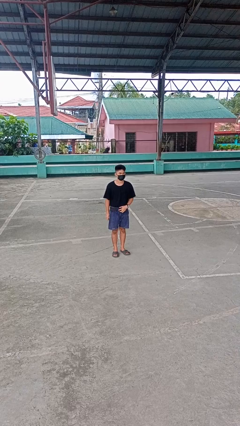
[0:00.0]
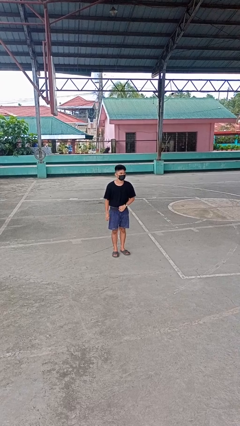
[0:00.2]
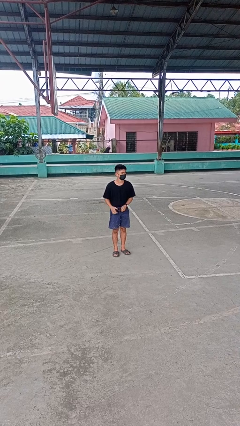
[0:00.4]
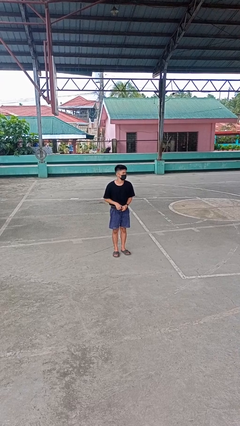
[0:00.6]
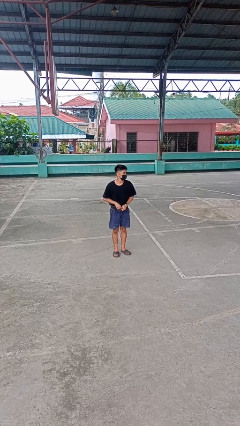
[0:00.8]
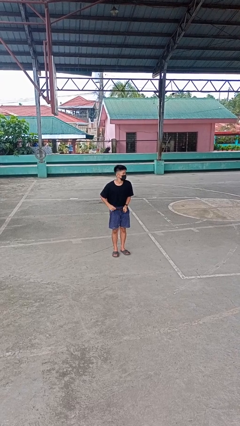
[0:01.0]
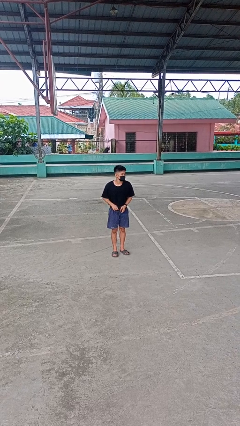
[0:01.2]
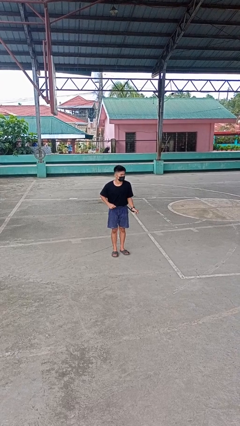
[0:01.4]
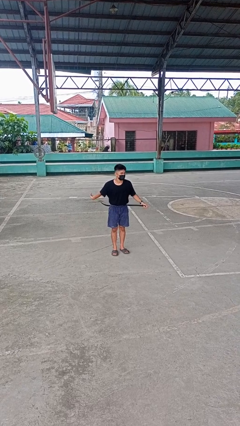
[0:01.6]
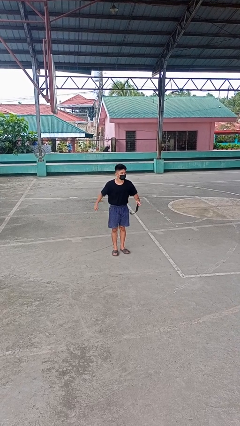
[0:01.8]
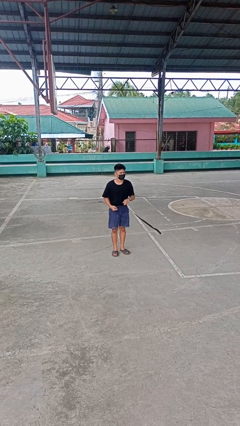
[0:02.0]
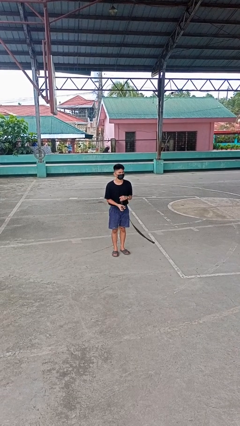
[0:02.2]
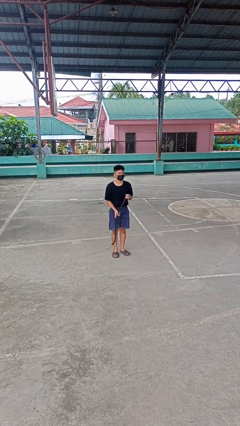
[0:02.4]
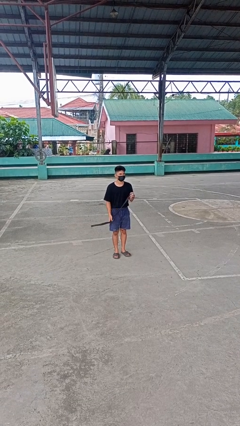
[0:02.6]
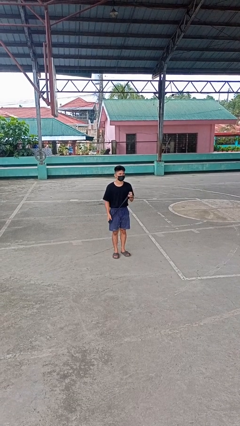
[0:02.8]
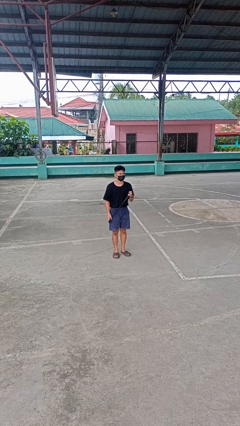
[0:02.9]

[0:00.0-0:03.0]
person takes off belt

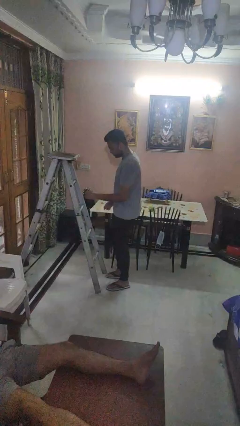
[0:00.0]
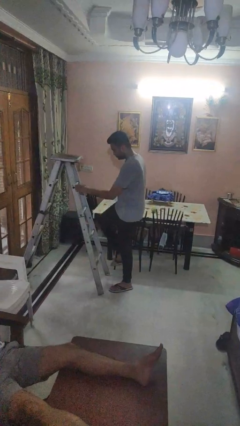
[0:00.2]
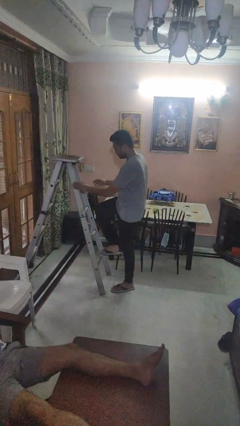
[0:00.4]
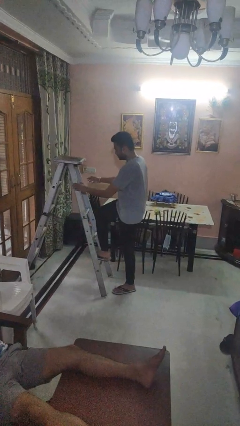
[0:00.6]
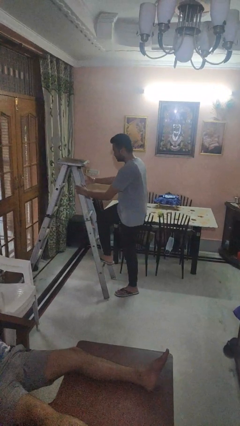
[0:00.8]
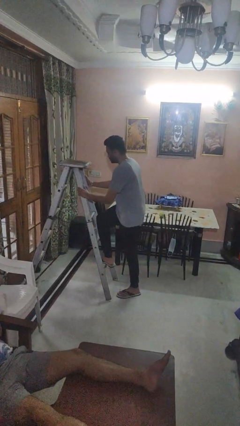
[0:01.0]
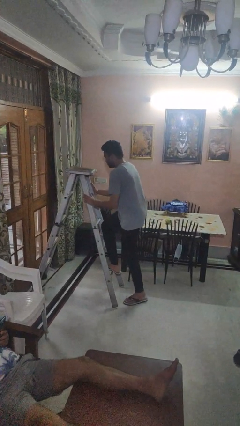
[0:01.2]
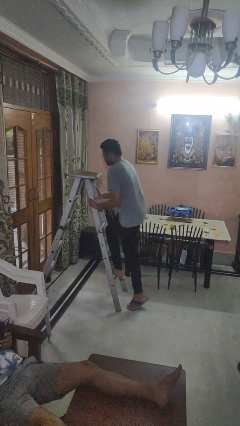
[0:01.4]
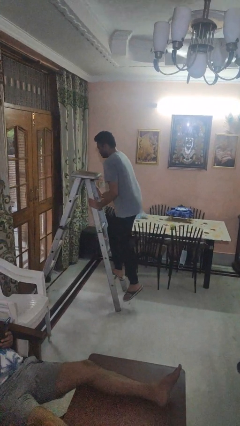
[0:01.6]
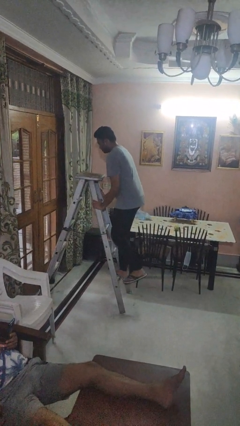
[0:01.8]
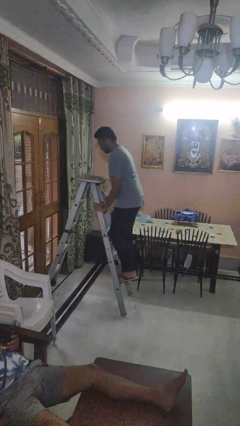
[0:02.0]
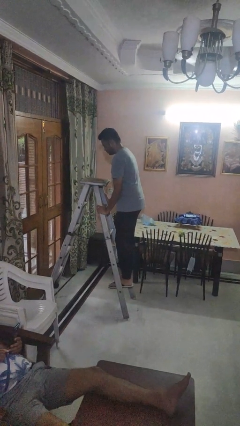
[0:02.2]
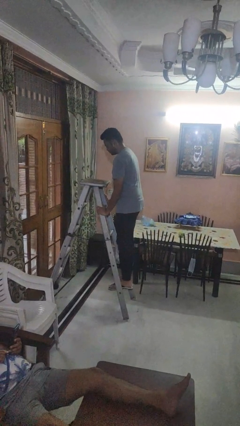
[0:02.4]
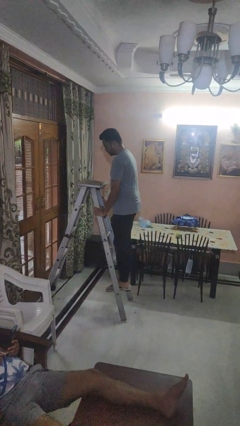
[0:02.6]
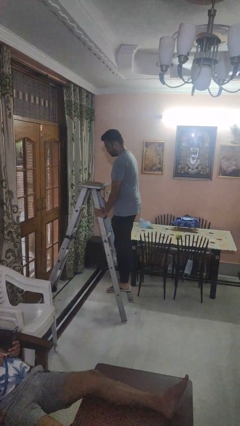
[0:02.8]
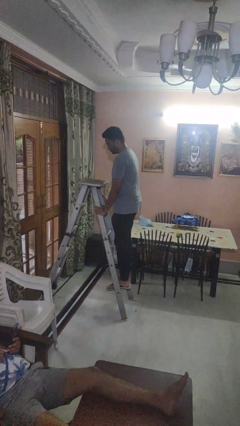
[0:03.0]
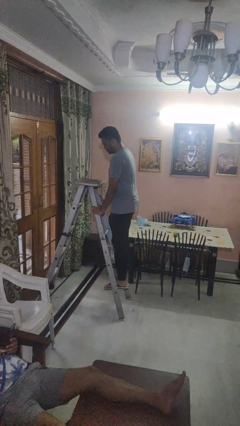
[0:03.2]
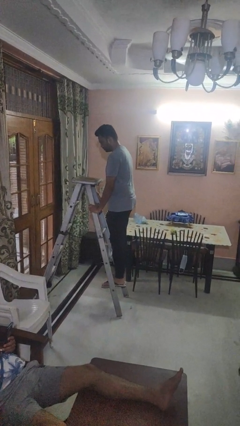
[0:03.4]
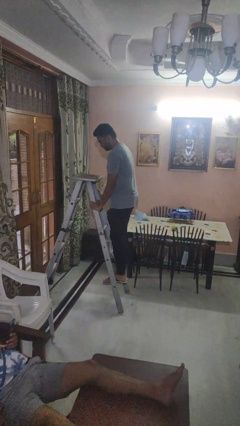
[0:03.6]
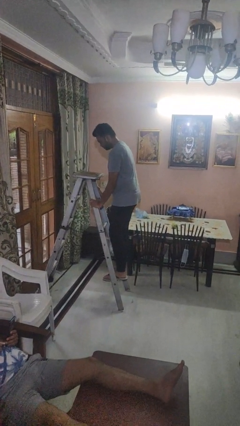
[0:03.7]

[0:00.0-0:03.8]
person climbs up ladder

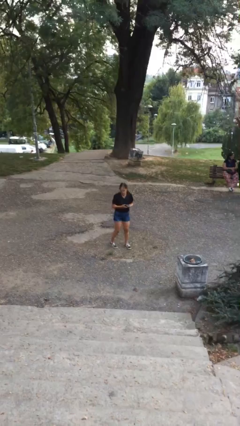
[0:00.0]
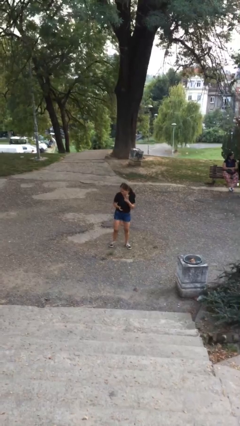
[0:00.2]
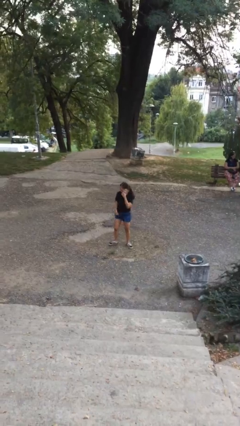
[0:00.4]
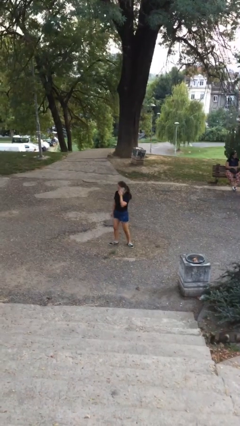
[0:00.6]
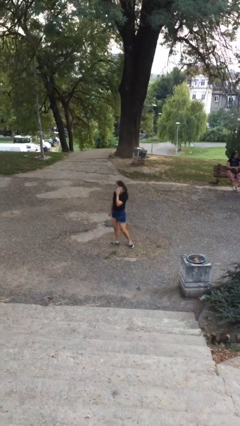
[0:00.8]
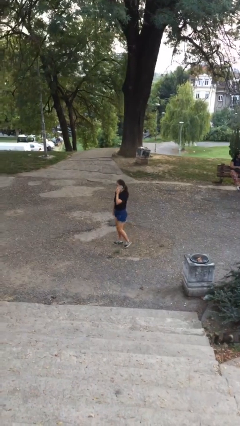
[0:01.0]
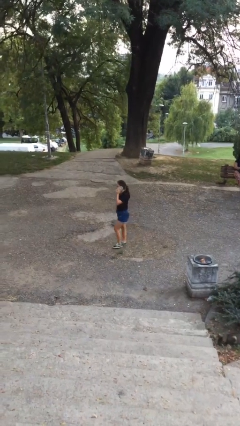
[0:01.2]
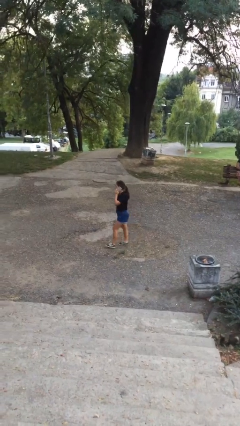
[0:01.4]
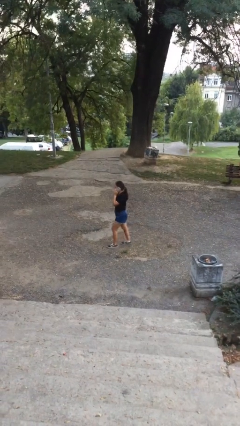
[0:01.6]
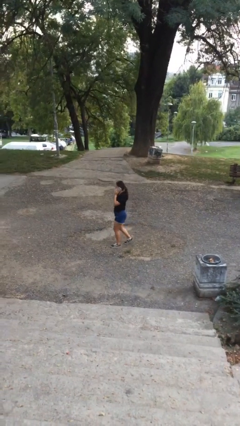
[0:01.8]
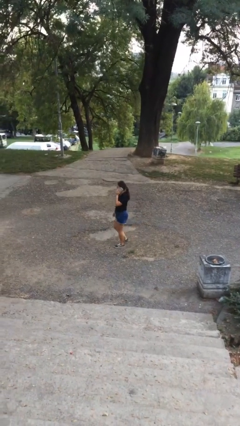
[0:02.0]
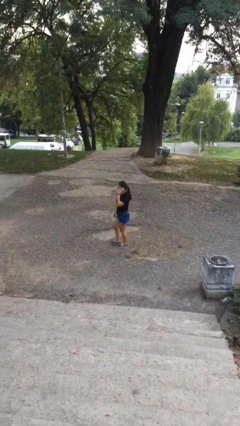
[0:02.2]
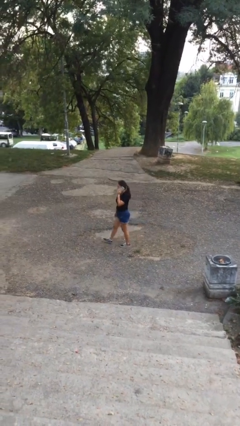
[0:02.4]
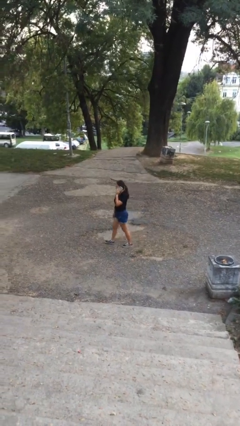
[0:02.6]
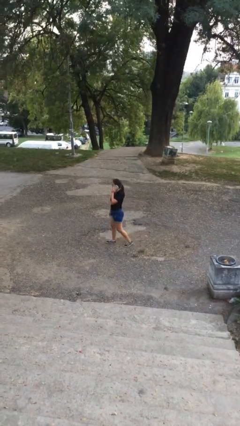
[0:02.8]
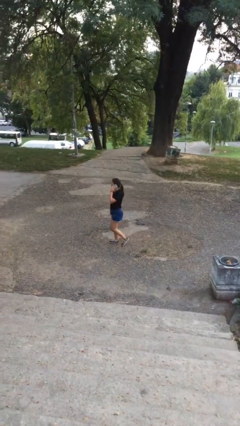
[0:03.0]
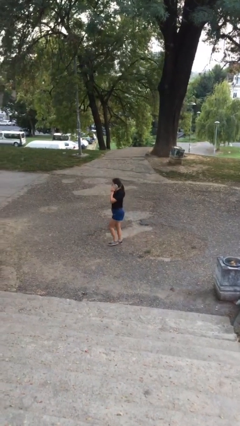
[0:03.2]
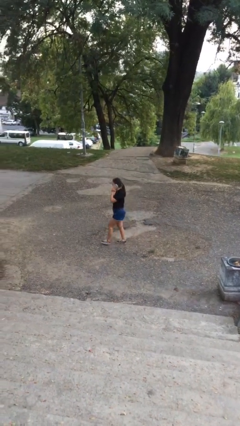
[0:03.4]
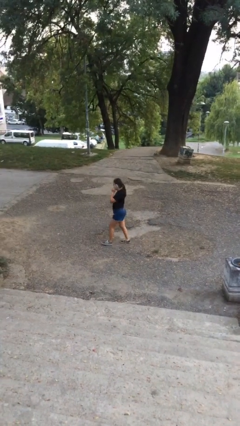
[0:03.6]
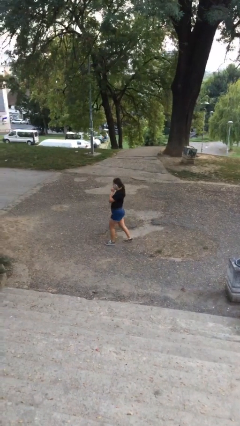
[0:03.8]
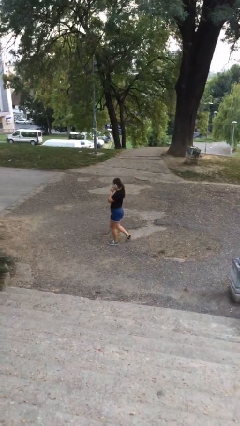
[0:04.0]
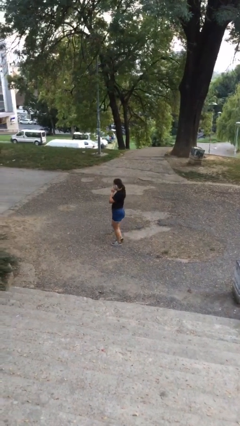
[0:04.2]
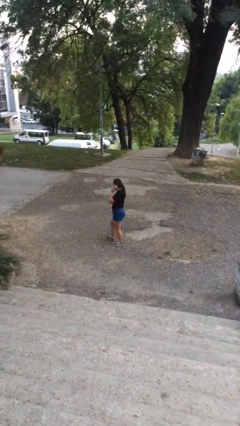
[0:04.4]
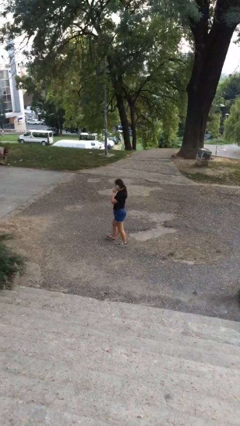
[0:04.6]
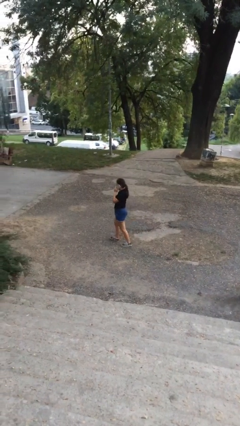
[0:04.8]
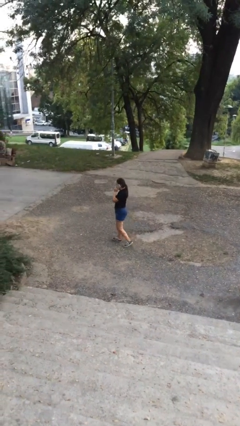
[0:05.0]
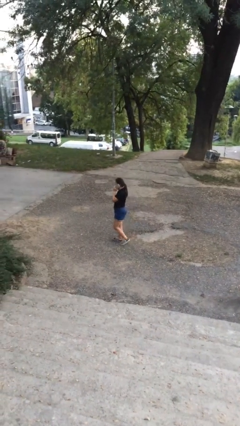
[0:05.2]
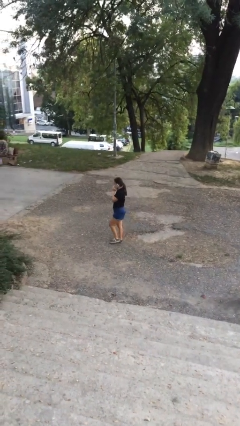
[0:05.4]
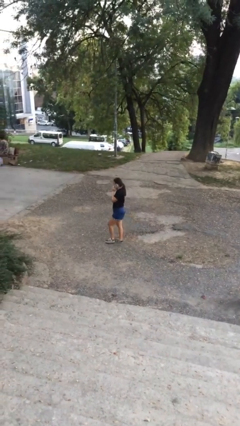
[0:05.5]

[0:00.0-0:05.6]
person talks on phone

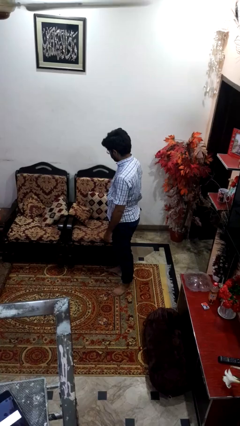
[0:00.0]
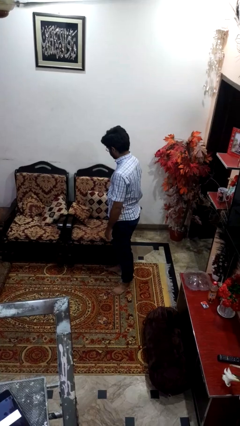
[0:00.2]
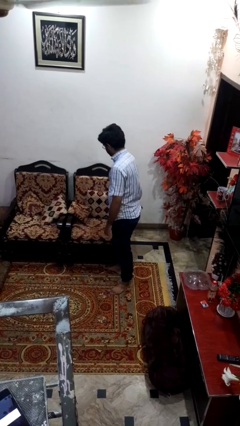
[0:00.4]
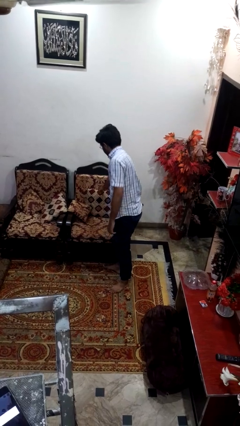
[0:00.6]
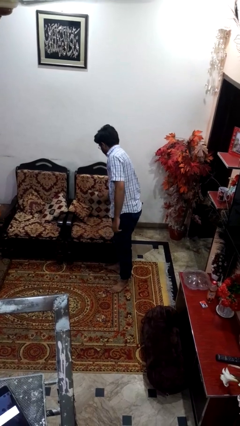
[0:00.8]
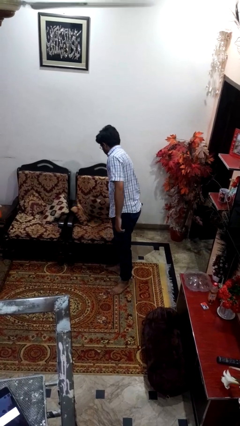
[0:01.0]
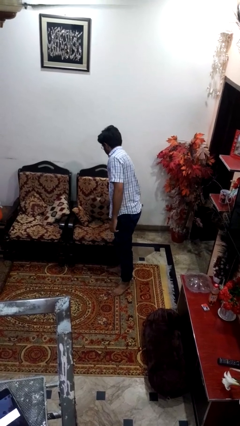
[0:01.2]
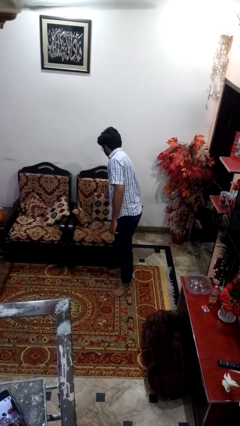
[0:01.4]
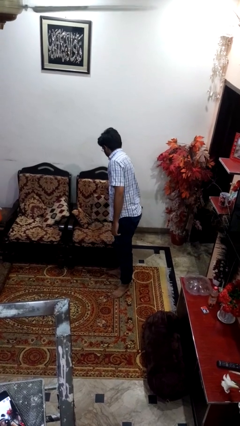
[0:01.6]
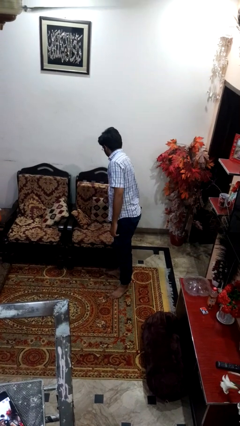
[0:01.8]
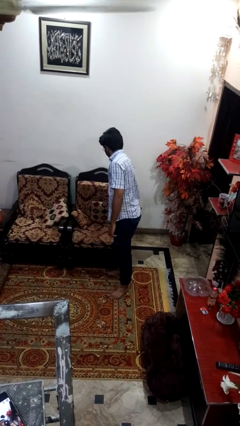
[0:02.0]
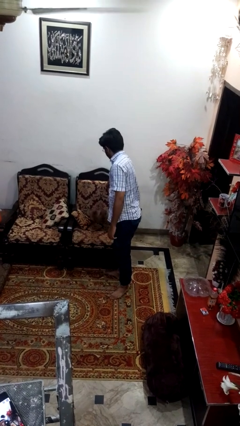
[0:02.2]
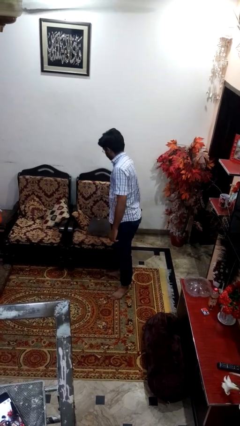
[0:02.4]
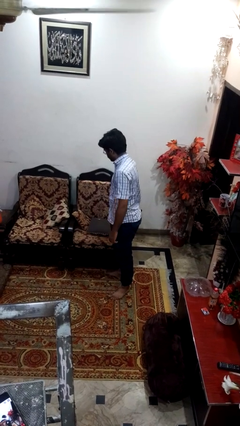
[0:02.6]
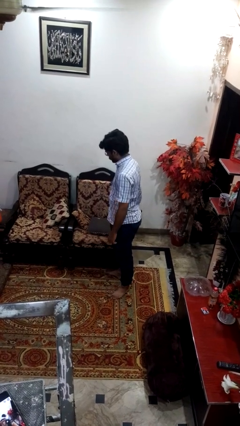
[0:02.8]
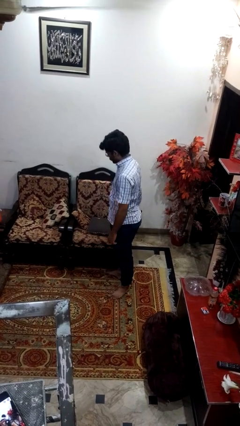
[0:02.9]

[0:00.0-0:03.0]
person searches in couch

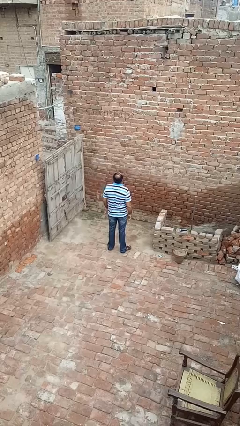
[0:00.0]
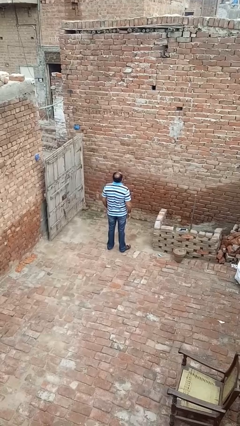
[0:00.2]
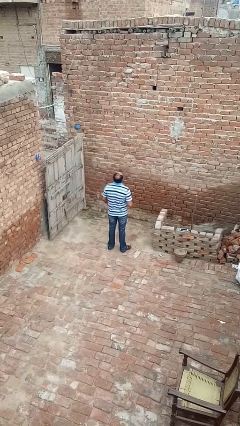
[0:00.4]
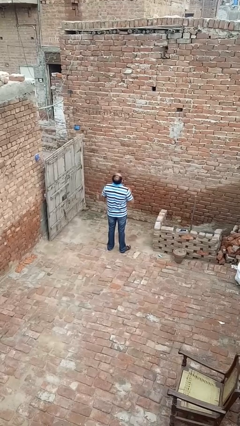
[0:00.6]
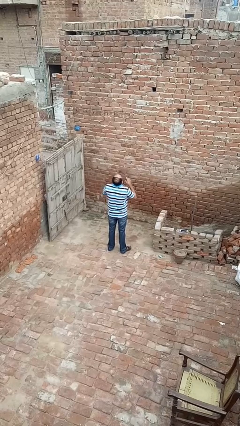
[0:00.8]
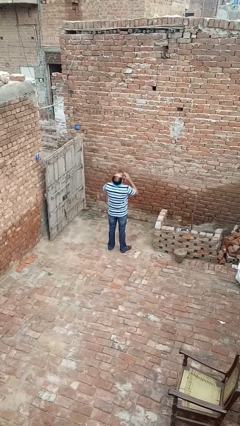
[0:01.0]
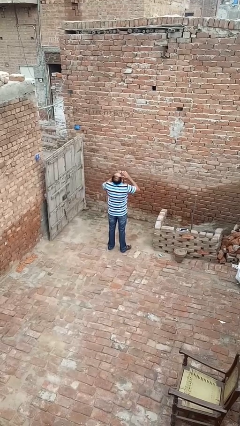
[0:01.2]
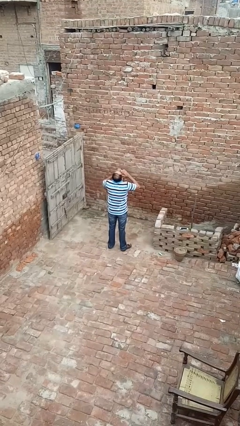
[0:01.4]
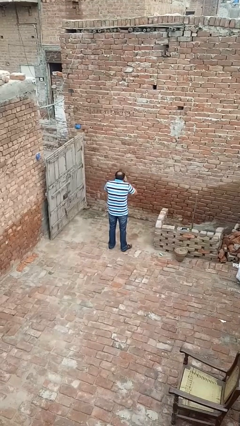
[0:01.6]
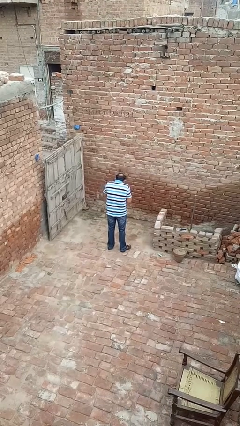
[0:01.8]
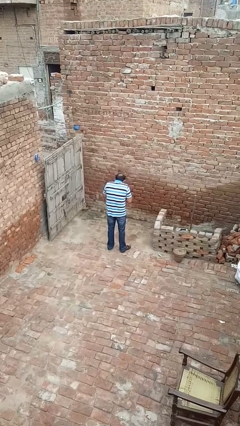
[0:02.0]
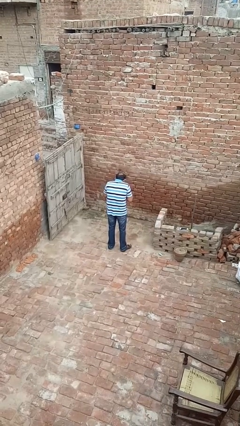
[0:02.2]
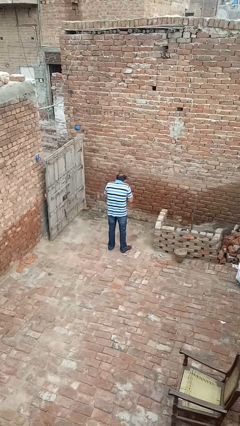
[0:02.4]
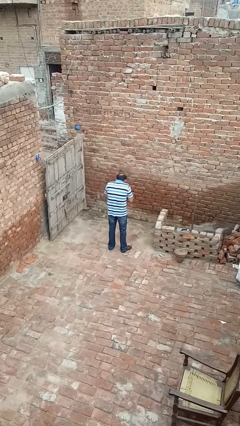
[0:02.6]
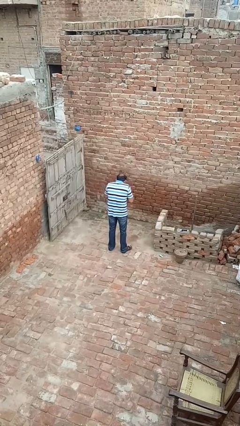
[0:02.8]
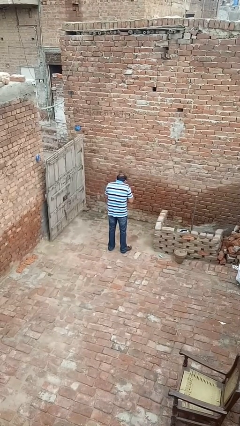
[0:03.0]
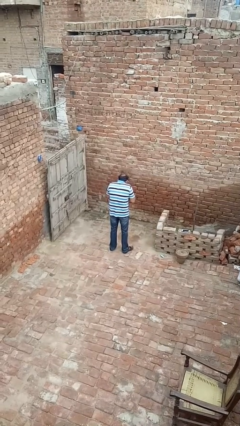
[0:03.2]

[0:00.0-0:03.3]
person sneezes into hand
